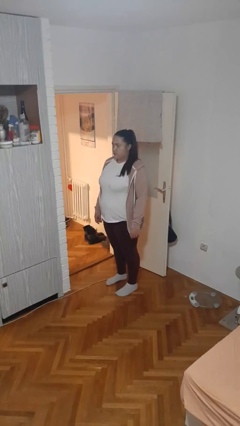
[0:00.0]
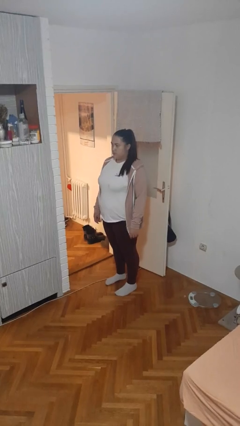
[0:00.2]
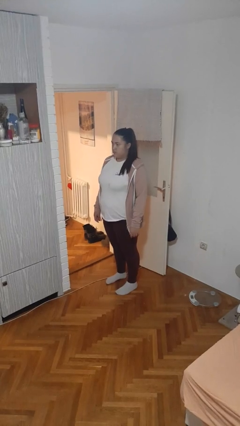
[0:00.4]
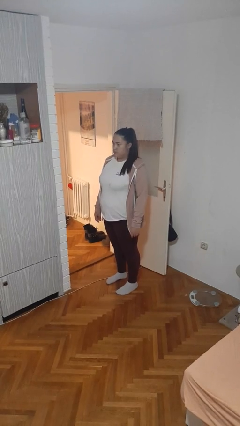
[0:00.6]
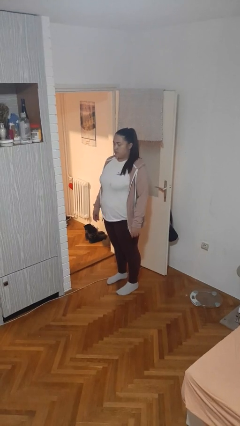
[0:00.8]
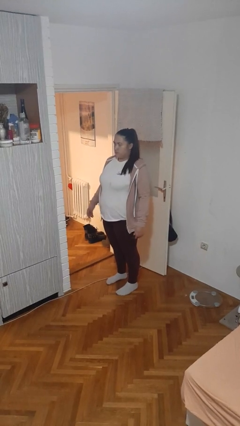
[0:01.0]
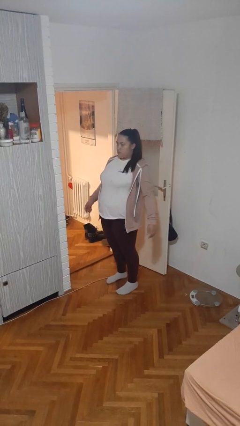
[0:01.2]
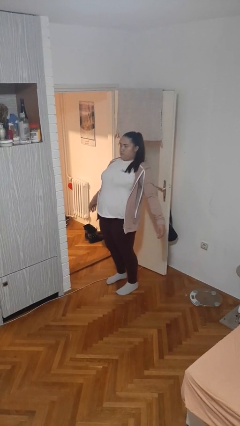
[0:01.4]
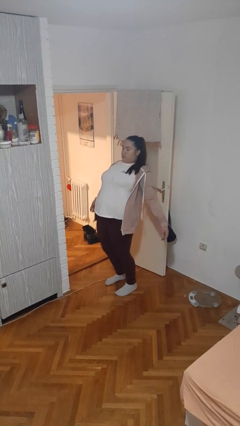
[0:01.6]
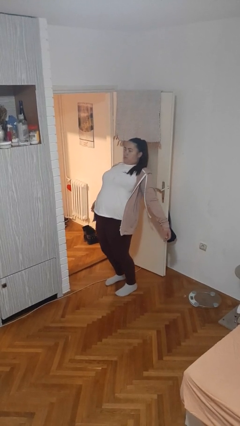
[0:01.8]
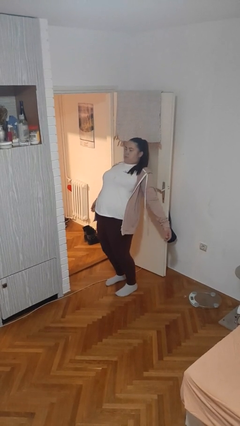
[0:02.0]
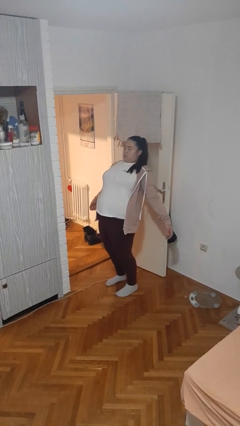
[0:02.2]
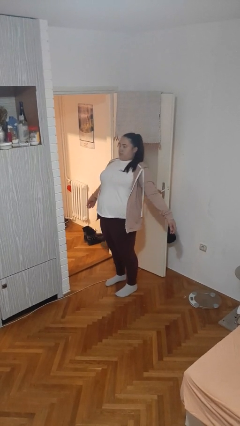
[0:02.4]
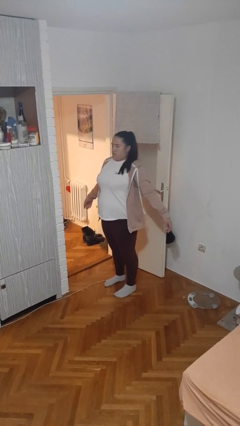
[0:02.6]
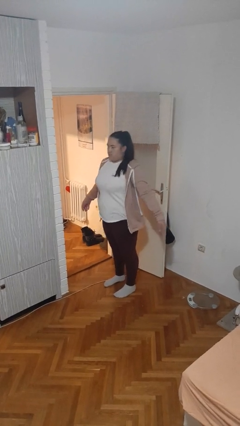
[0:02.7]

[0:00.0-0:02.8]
person stretches back

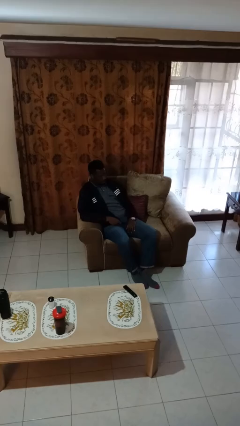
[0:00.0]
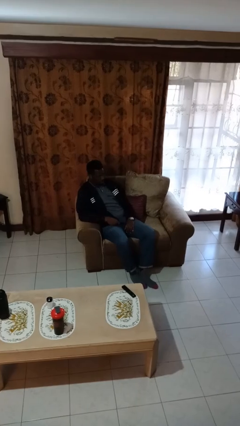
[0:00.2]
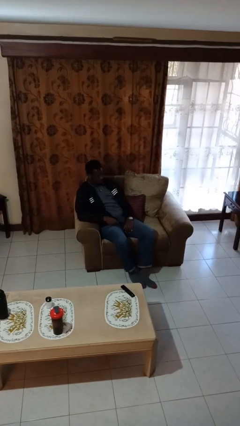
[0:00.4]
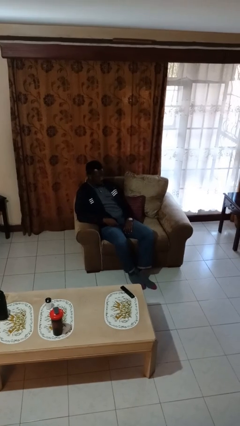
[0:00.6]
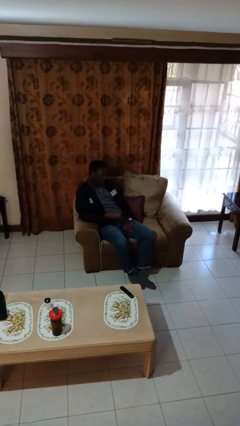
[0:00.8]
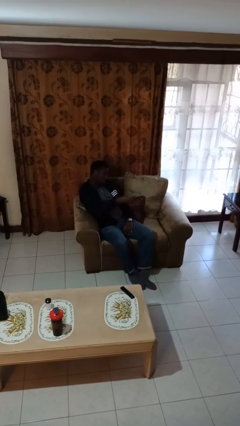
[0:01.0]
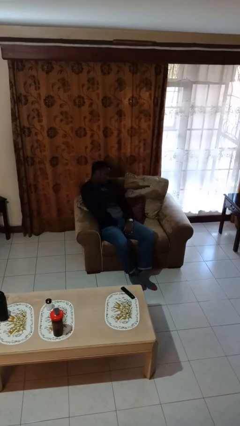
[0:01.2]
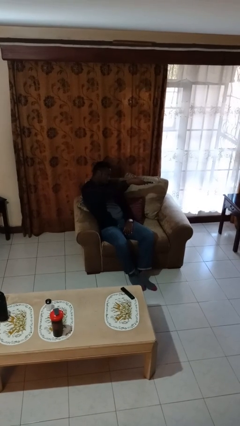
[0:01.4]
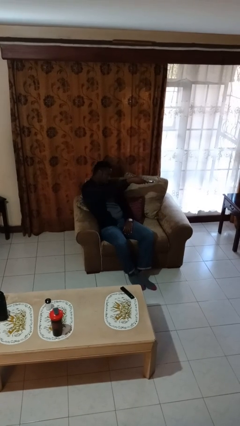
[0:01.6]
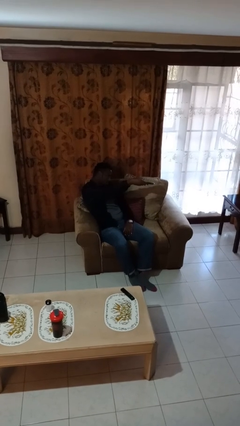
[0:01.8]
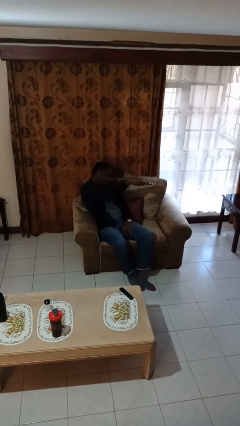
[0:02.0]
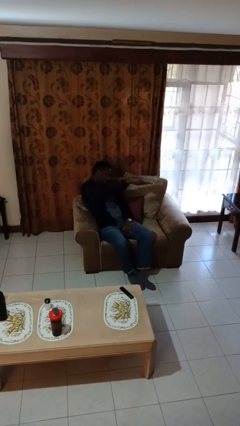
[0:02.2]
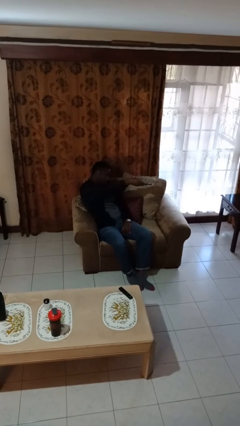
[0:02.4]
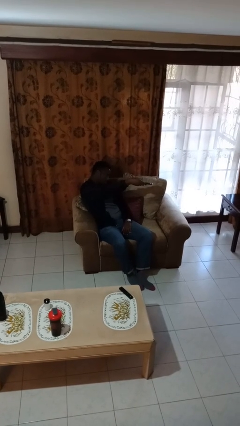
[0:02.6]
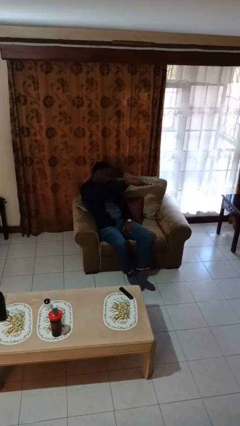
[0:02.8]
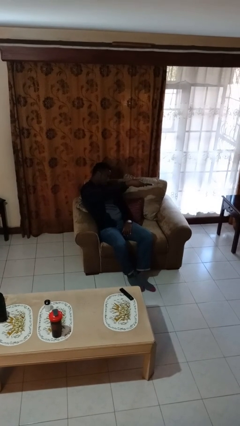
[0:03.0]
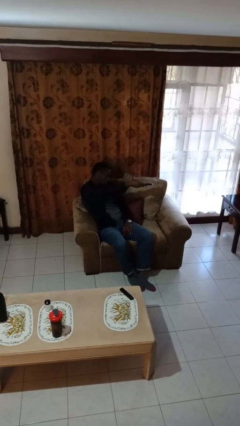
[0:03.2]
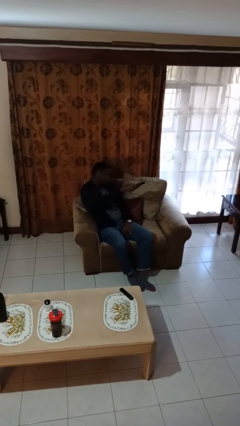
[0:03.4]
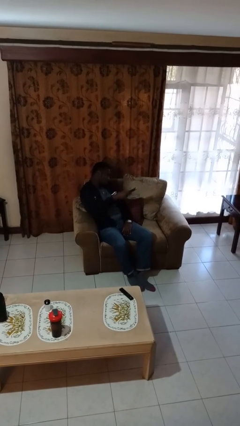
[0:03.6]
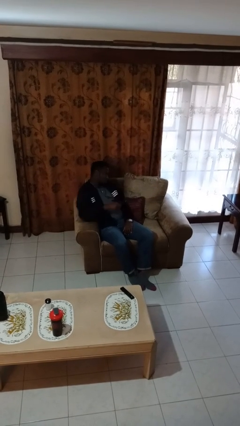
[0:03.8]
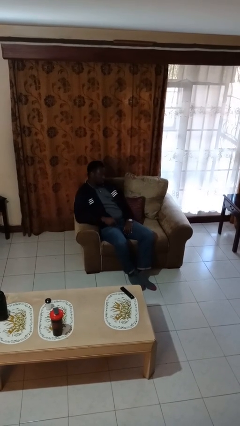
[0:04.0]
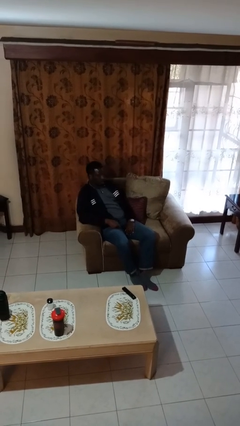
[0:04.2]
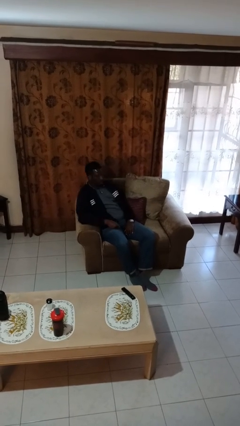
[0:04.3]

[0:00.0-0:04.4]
person uses television remote

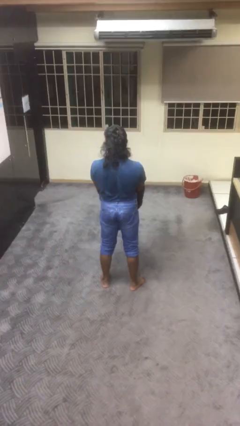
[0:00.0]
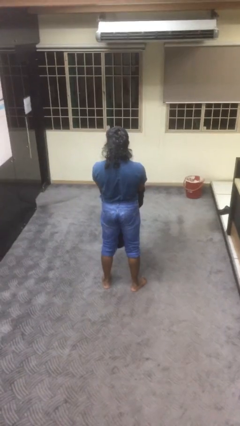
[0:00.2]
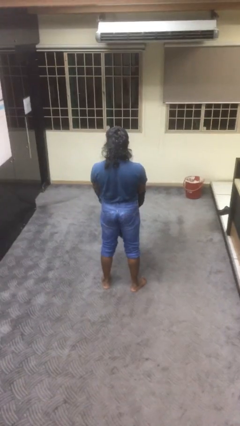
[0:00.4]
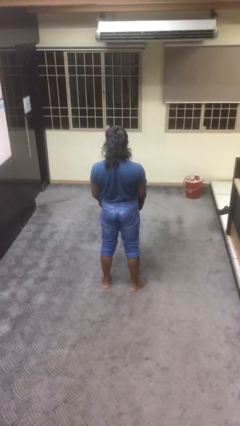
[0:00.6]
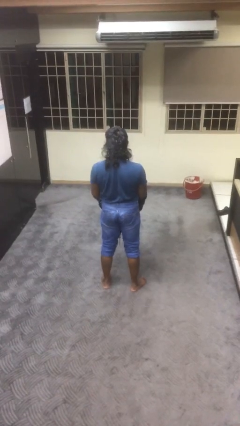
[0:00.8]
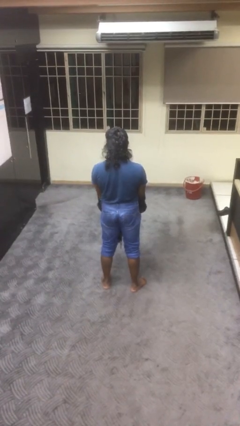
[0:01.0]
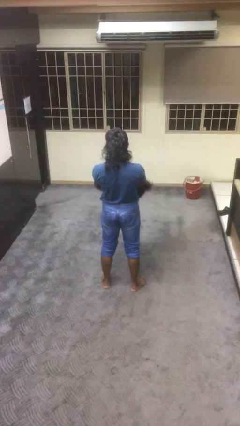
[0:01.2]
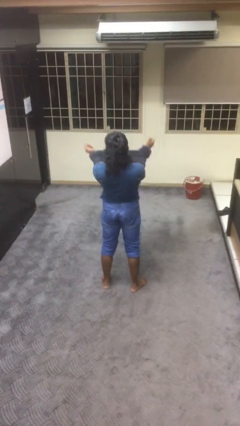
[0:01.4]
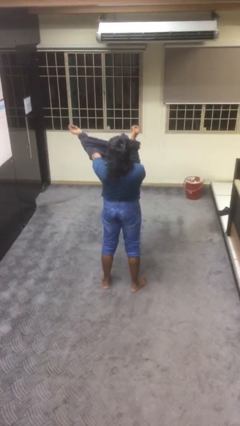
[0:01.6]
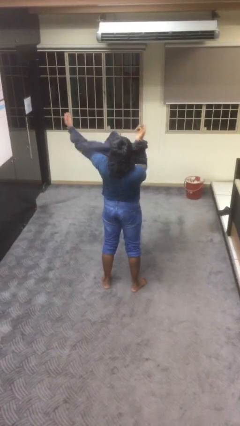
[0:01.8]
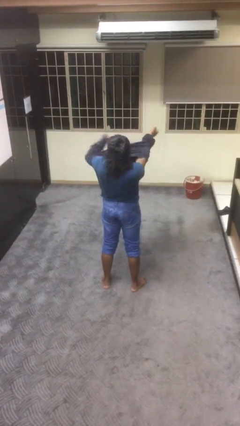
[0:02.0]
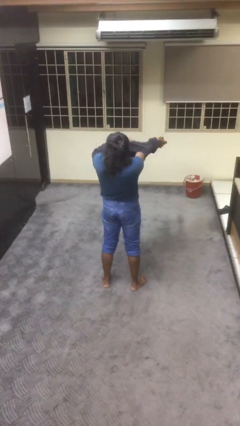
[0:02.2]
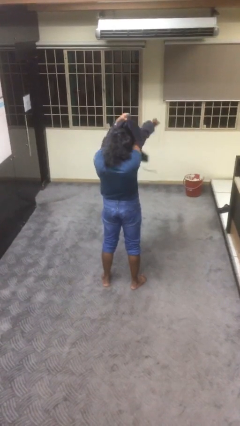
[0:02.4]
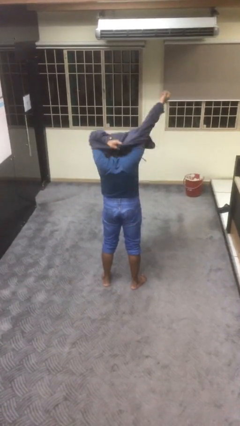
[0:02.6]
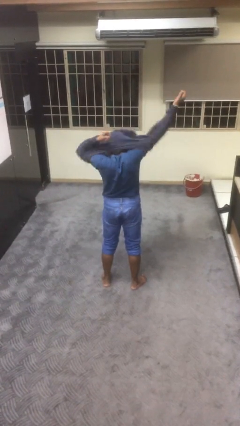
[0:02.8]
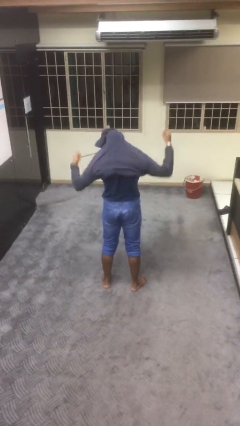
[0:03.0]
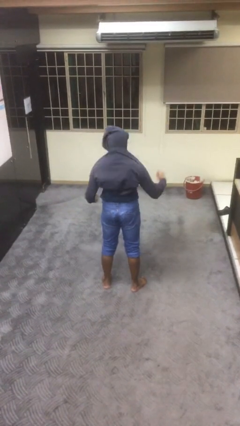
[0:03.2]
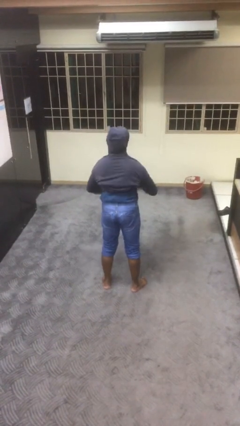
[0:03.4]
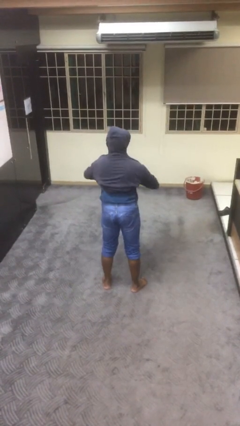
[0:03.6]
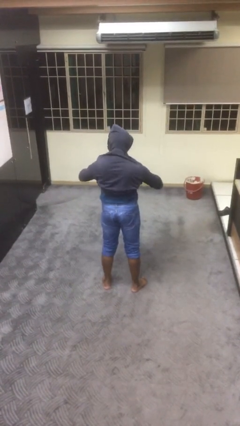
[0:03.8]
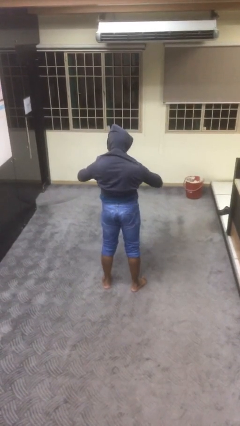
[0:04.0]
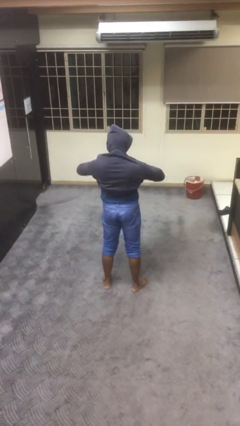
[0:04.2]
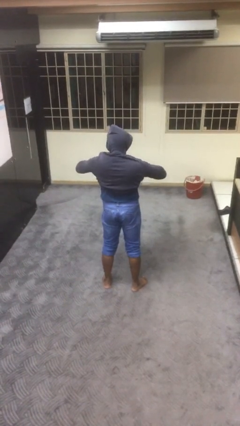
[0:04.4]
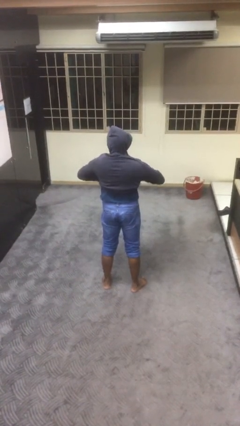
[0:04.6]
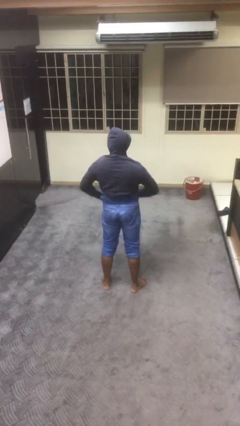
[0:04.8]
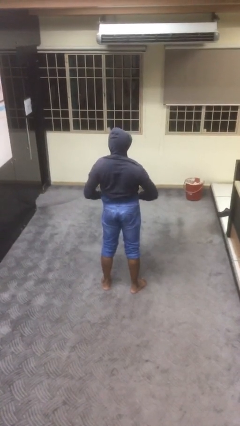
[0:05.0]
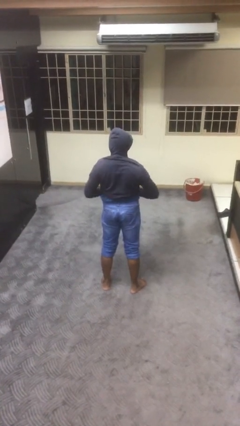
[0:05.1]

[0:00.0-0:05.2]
person puts on hoodie

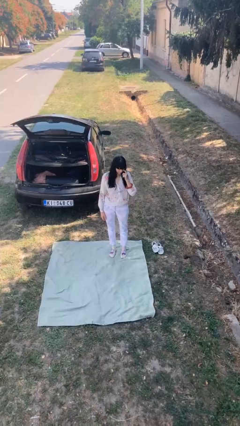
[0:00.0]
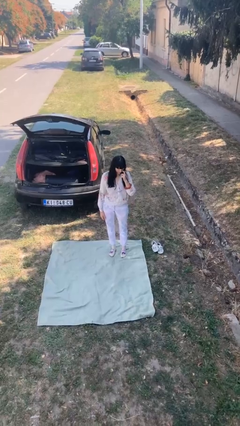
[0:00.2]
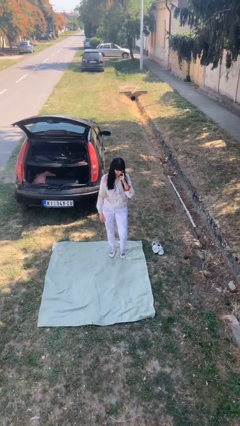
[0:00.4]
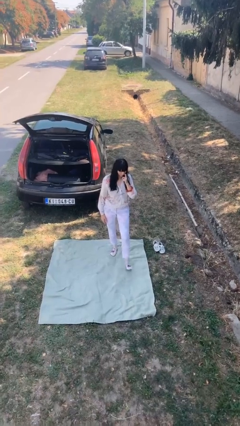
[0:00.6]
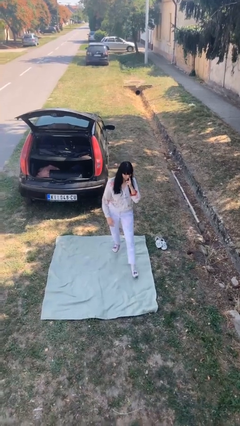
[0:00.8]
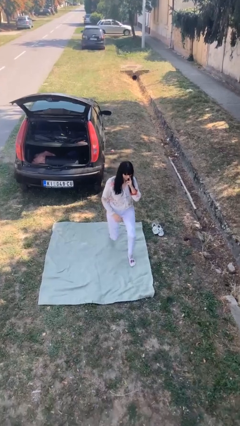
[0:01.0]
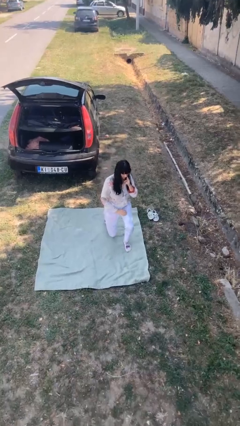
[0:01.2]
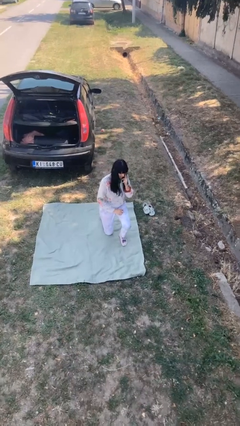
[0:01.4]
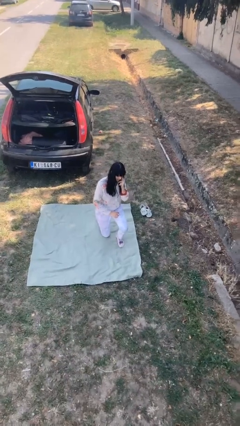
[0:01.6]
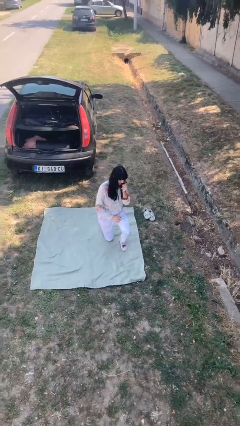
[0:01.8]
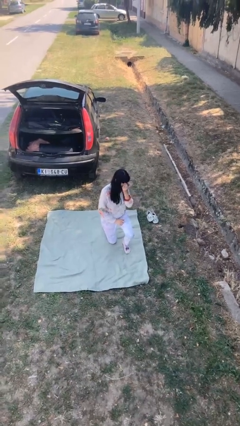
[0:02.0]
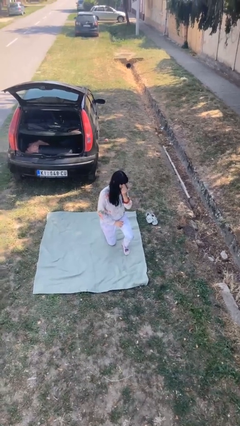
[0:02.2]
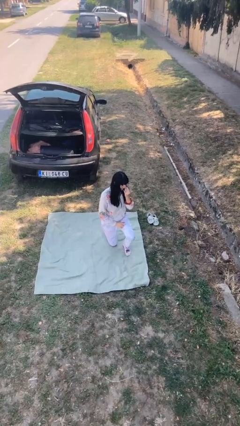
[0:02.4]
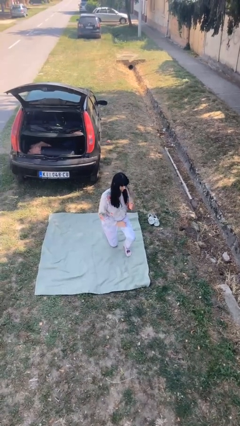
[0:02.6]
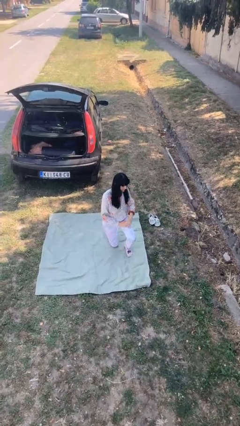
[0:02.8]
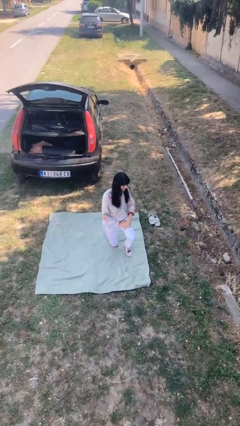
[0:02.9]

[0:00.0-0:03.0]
person kneels

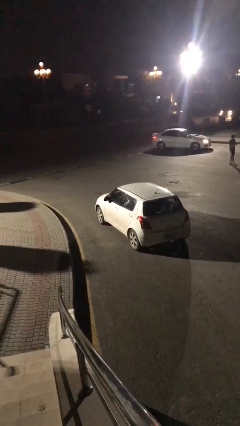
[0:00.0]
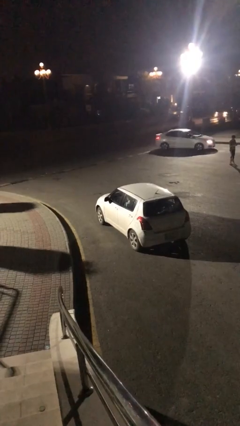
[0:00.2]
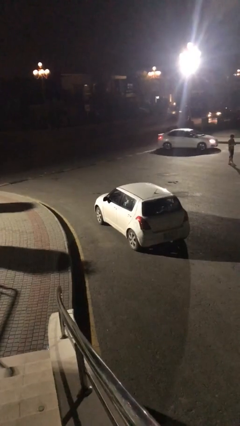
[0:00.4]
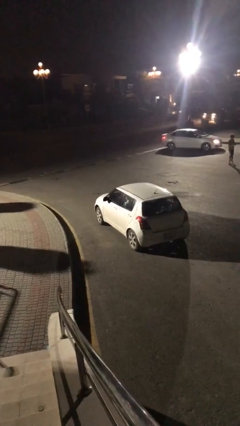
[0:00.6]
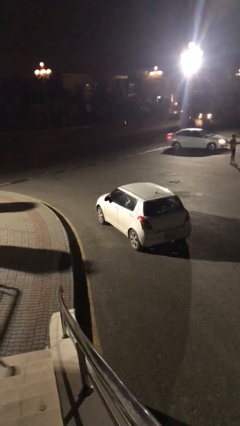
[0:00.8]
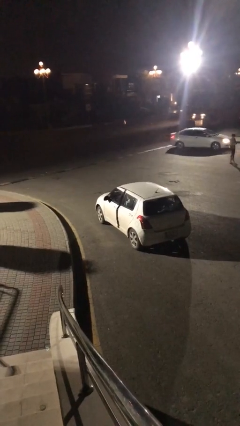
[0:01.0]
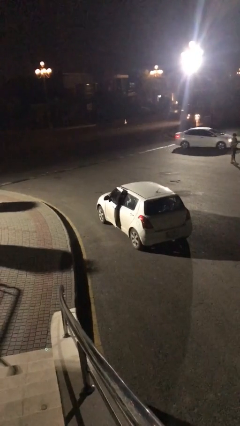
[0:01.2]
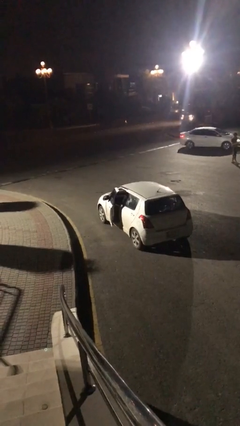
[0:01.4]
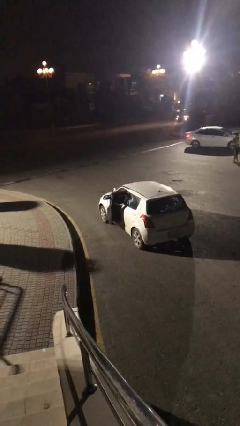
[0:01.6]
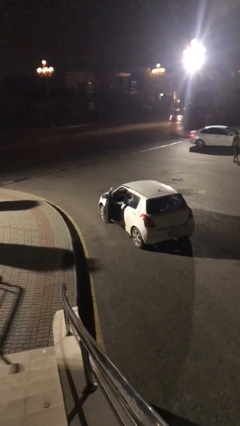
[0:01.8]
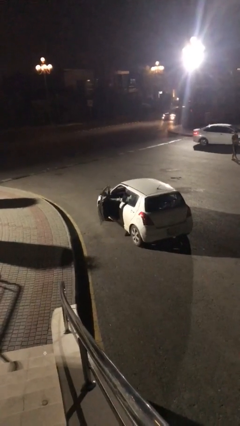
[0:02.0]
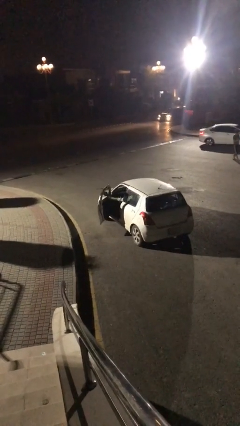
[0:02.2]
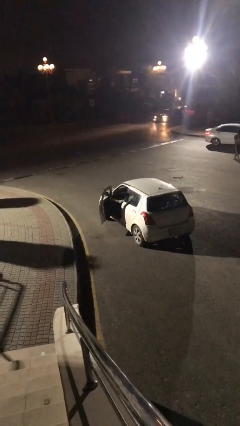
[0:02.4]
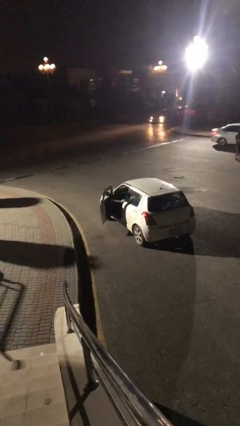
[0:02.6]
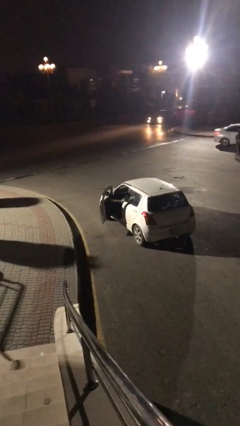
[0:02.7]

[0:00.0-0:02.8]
person opens car door
